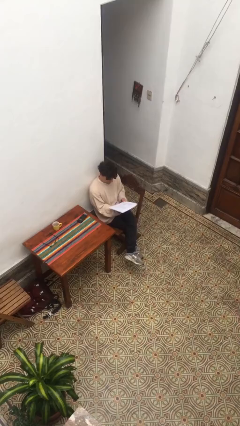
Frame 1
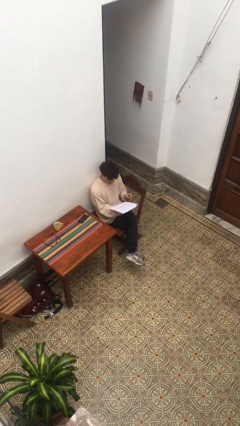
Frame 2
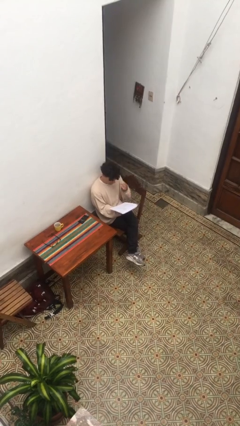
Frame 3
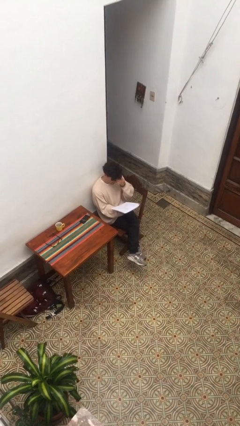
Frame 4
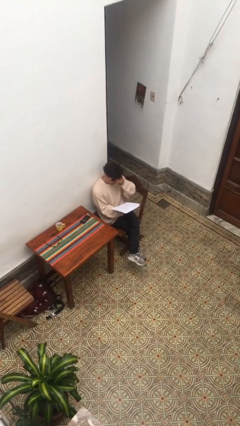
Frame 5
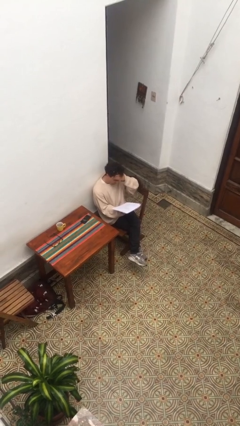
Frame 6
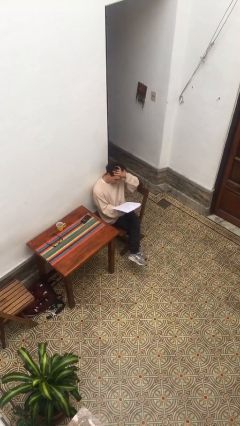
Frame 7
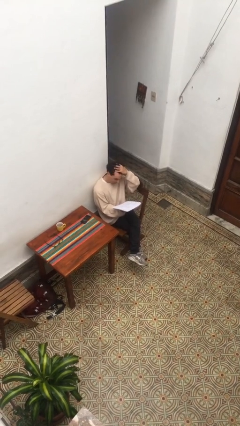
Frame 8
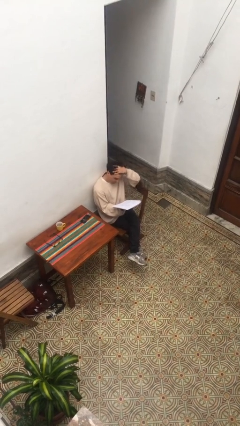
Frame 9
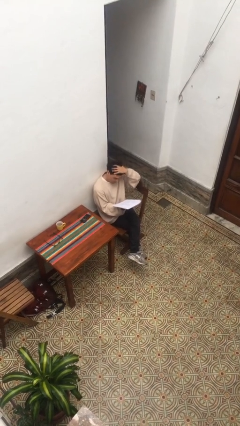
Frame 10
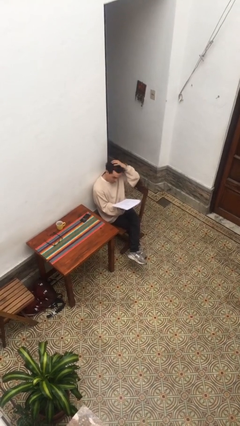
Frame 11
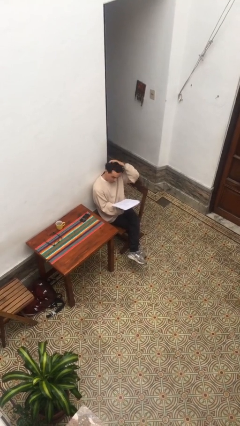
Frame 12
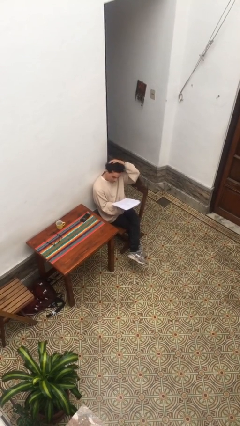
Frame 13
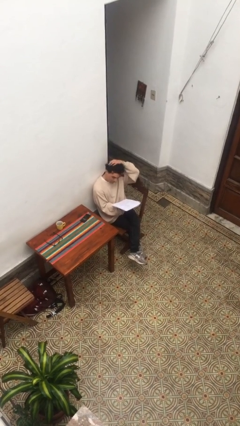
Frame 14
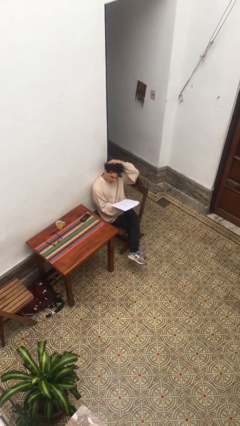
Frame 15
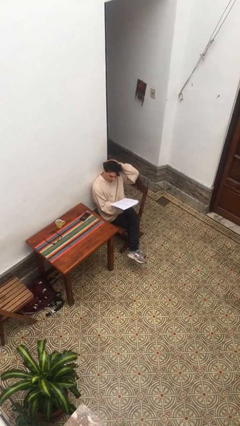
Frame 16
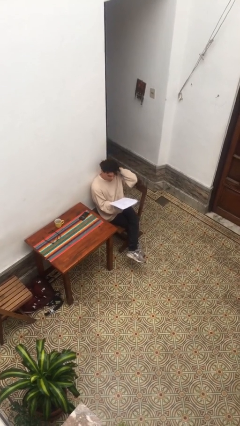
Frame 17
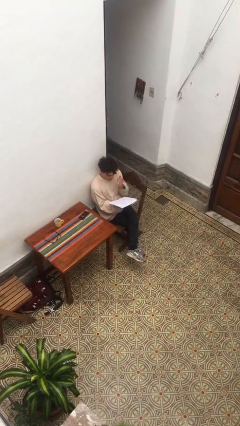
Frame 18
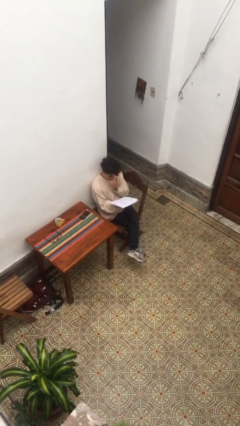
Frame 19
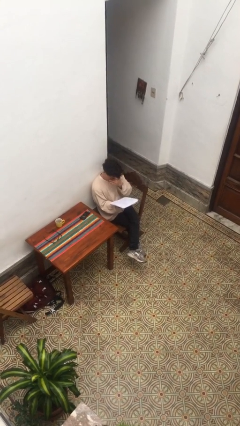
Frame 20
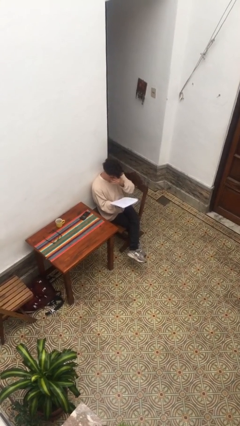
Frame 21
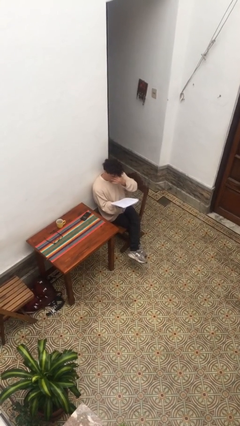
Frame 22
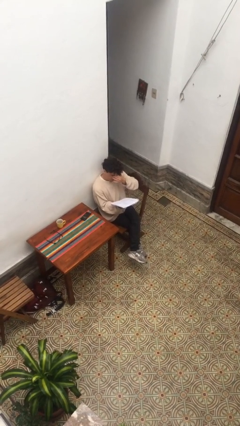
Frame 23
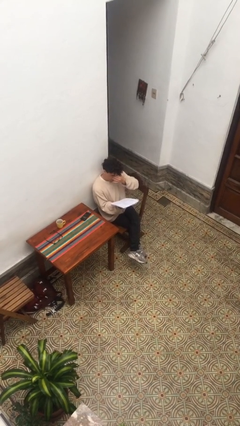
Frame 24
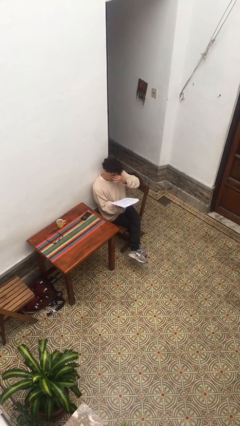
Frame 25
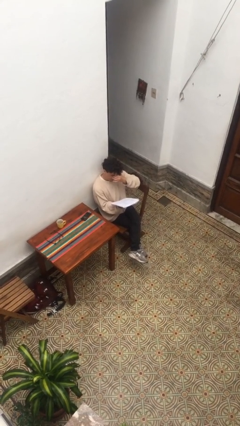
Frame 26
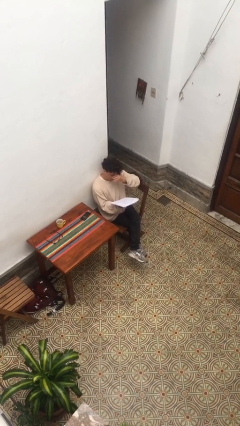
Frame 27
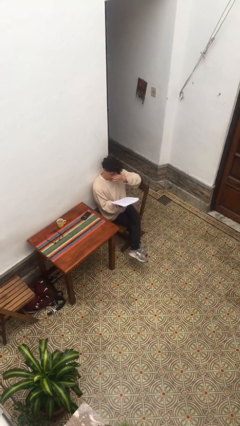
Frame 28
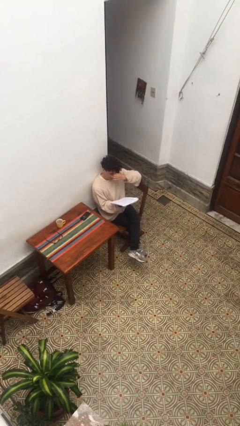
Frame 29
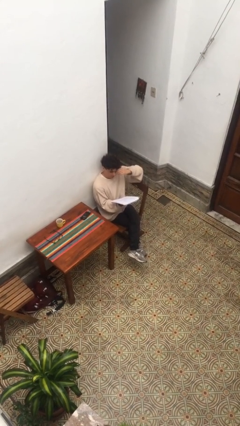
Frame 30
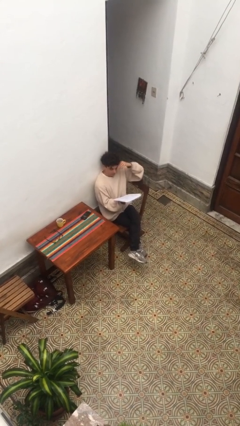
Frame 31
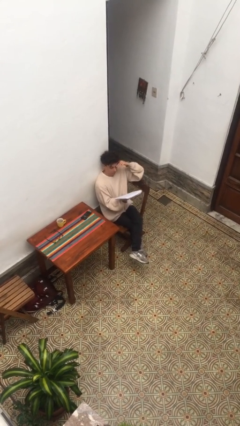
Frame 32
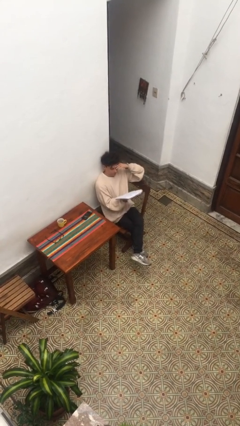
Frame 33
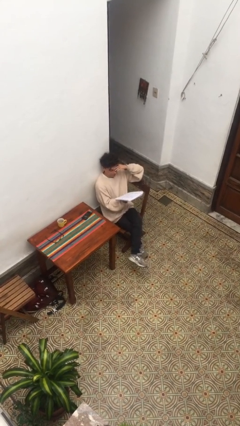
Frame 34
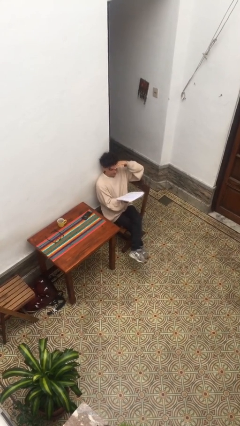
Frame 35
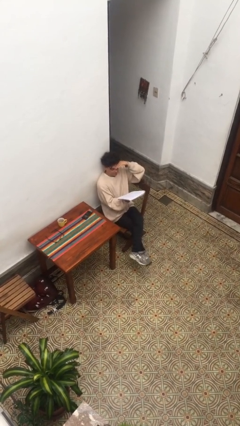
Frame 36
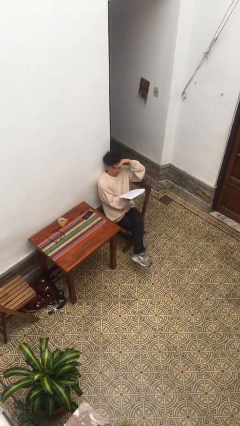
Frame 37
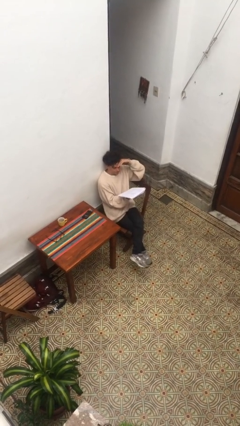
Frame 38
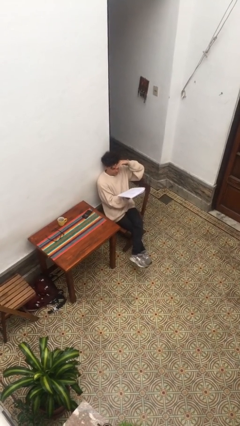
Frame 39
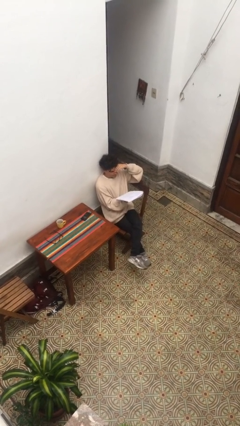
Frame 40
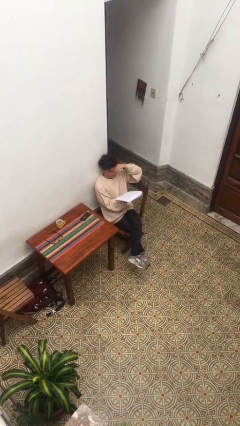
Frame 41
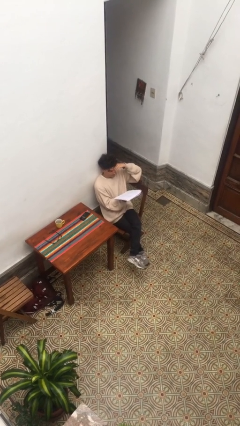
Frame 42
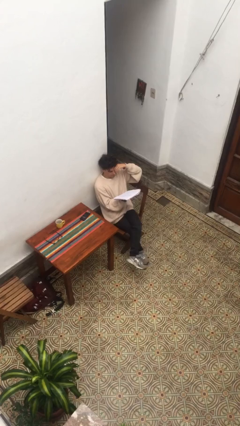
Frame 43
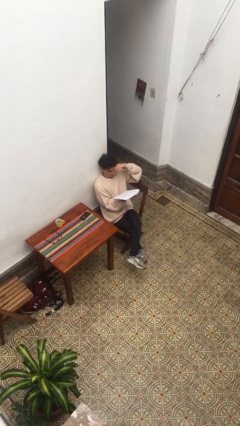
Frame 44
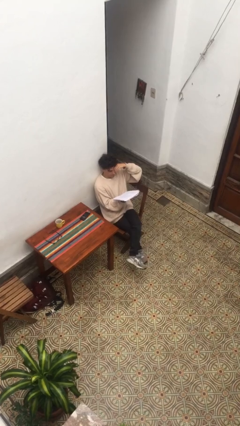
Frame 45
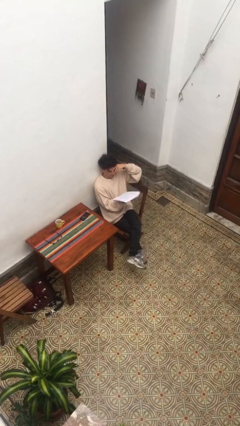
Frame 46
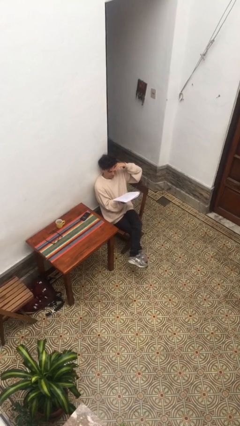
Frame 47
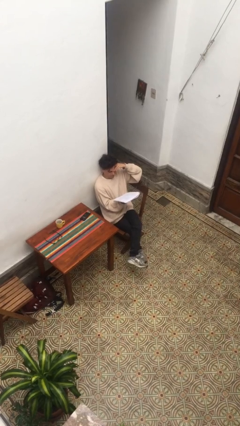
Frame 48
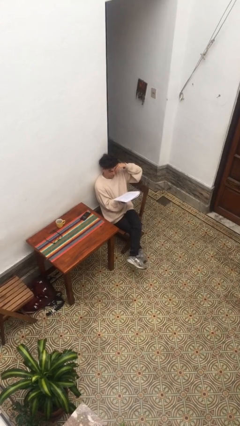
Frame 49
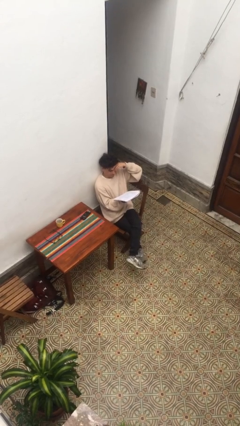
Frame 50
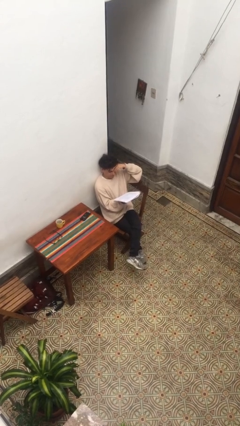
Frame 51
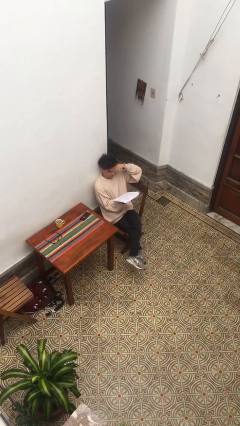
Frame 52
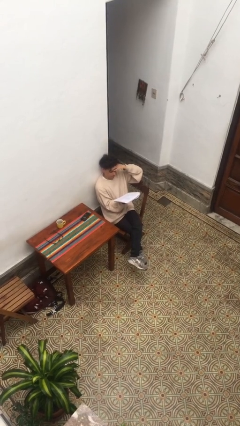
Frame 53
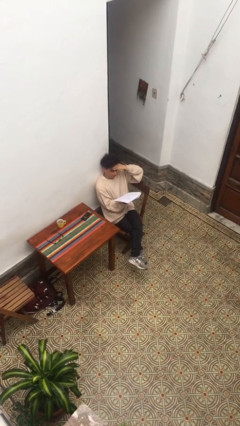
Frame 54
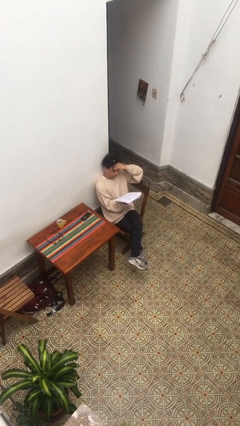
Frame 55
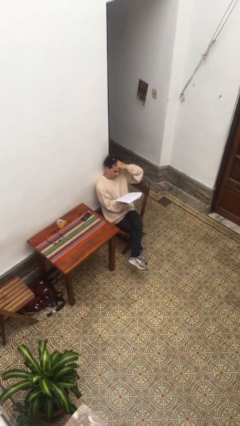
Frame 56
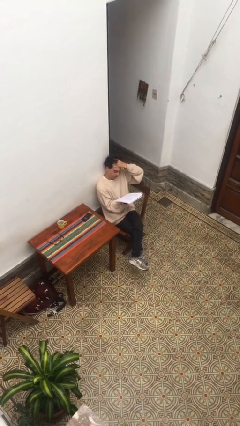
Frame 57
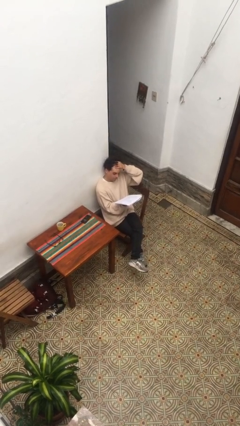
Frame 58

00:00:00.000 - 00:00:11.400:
person reads document

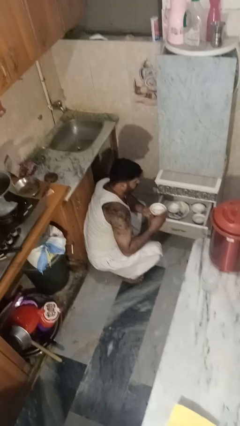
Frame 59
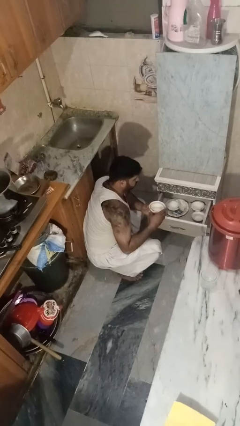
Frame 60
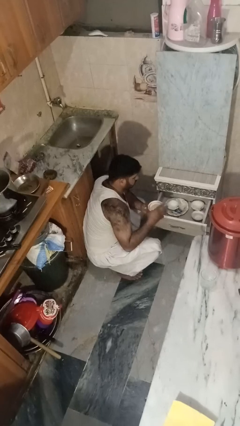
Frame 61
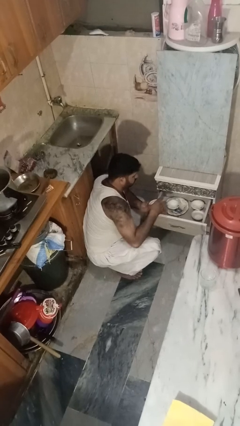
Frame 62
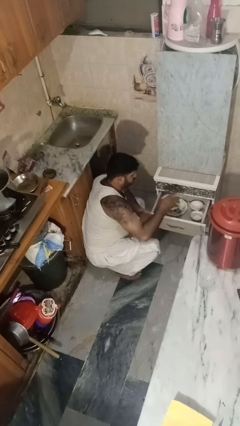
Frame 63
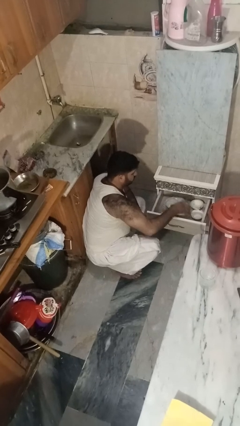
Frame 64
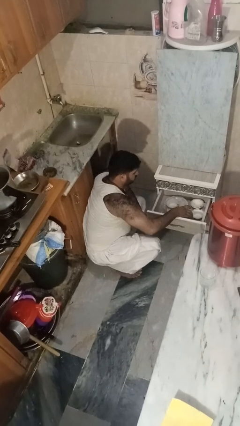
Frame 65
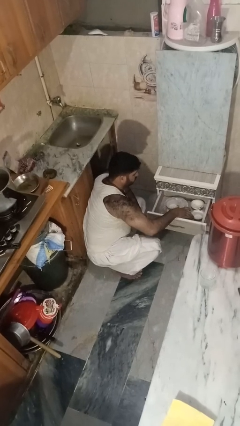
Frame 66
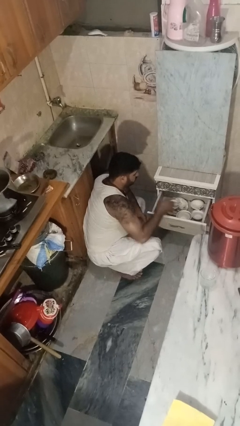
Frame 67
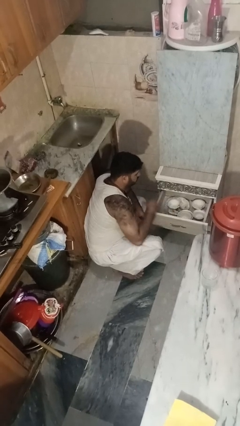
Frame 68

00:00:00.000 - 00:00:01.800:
person puts object into kitchen drawer

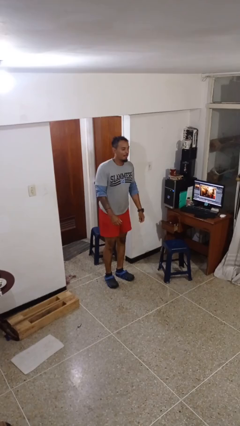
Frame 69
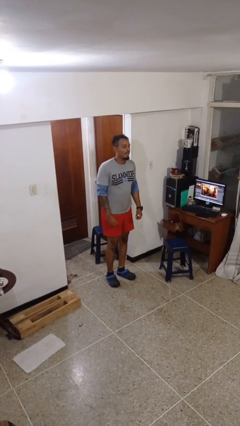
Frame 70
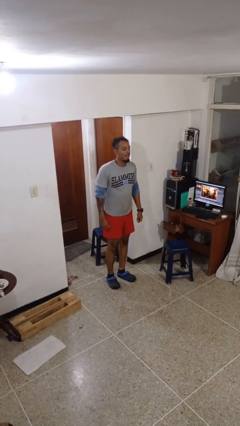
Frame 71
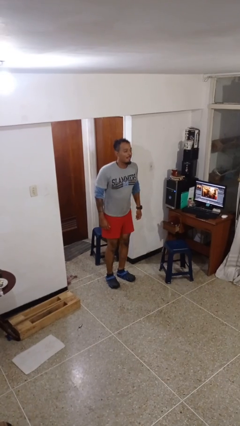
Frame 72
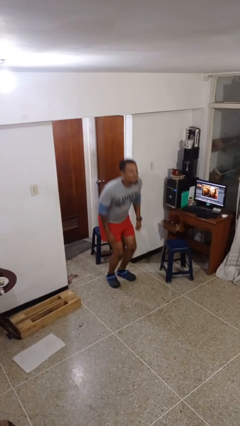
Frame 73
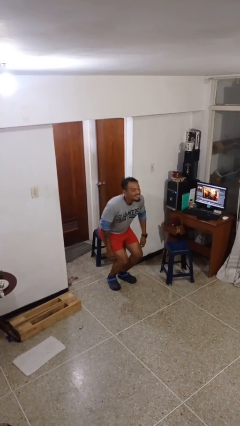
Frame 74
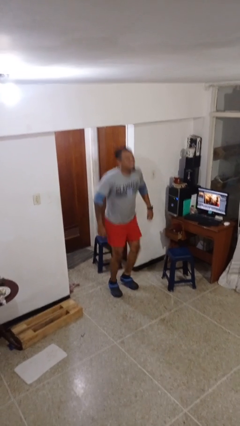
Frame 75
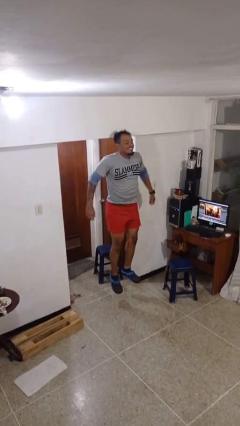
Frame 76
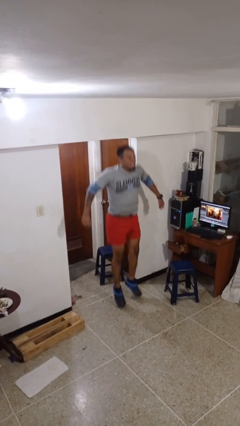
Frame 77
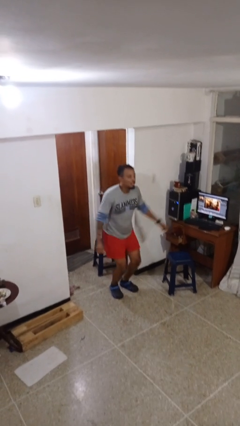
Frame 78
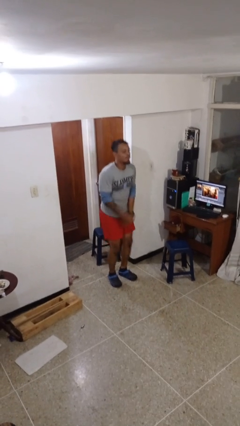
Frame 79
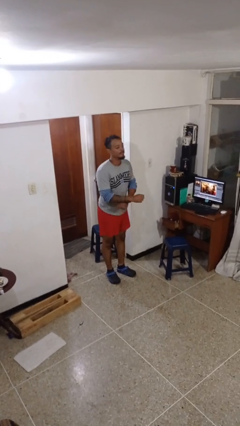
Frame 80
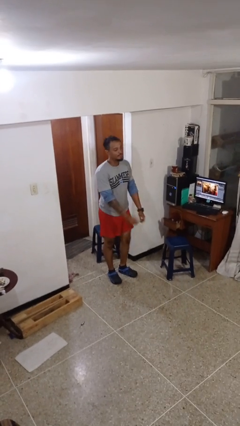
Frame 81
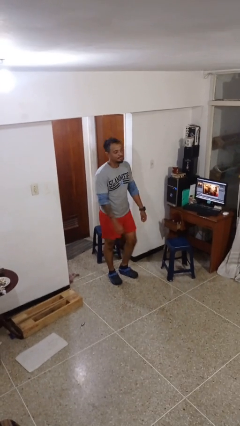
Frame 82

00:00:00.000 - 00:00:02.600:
person jumps

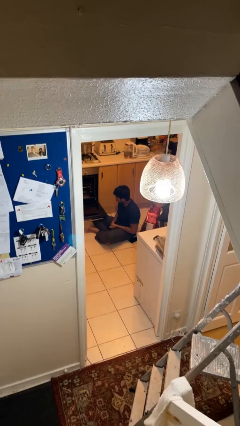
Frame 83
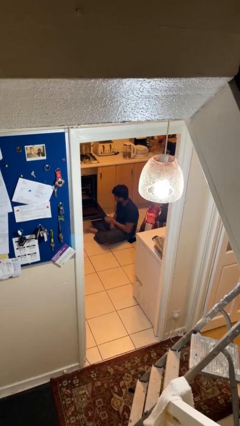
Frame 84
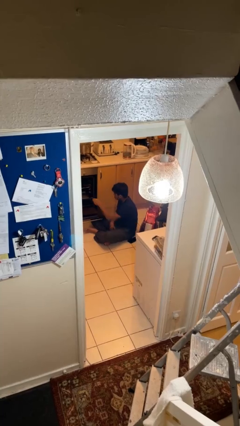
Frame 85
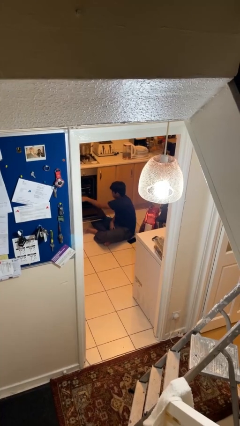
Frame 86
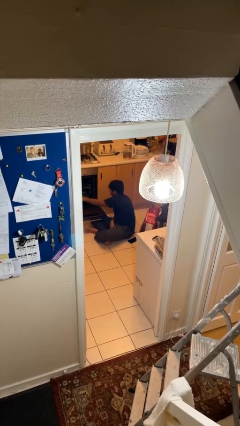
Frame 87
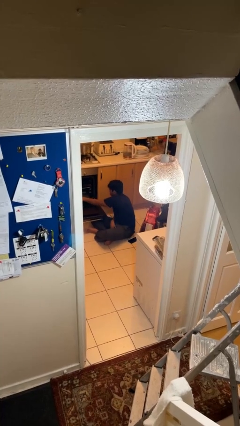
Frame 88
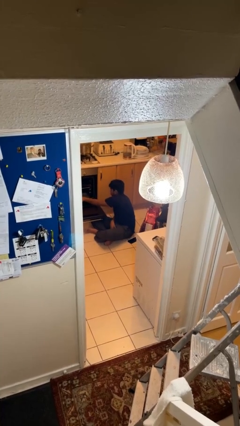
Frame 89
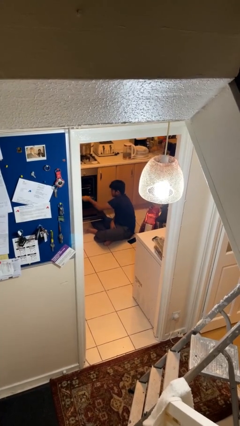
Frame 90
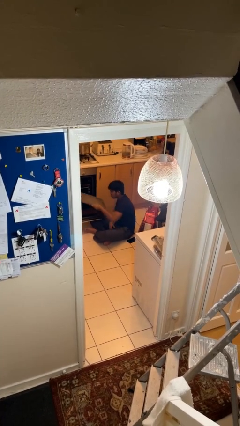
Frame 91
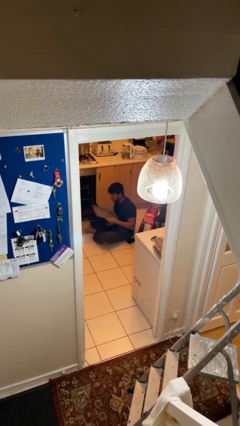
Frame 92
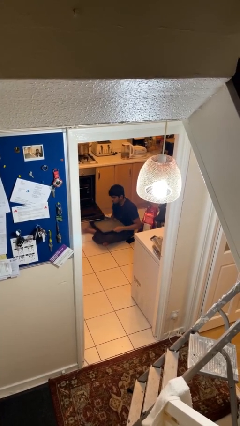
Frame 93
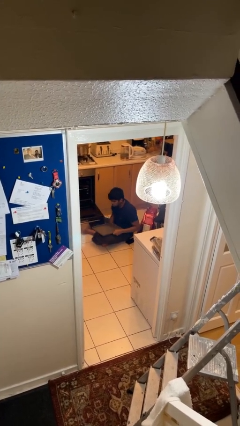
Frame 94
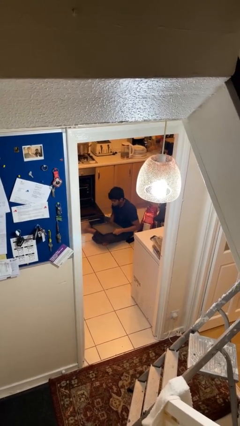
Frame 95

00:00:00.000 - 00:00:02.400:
person takes object from oven
